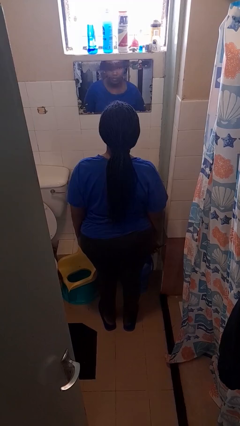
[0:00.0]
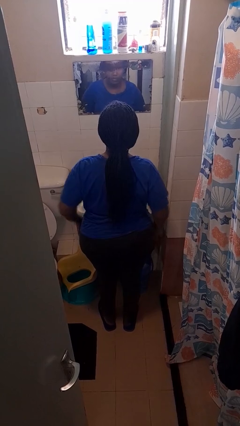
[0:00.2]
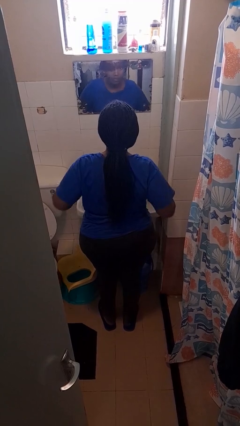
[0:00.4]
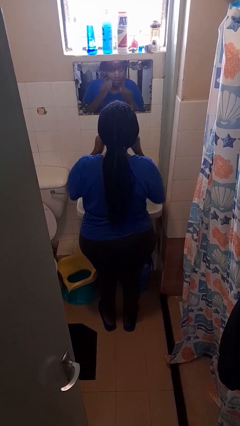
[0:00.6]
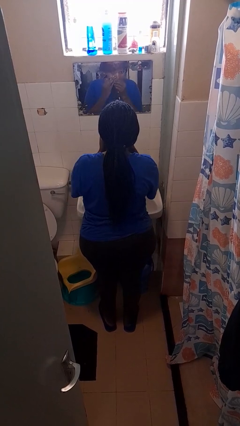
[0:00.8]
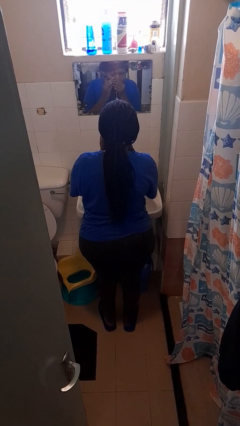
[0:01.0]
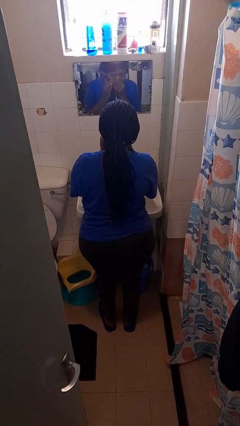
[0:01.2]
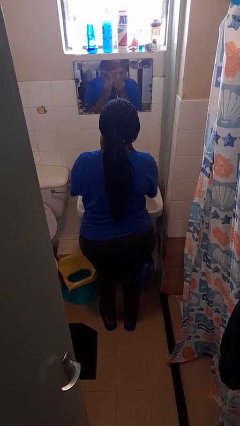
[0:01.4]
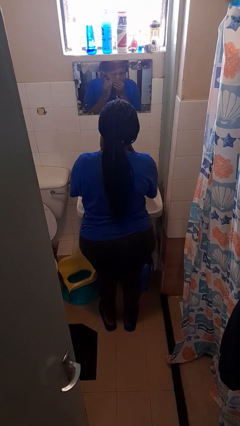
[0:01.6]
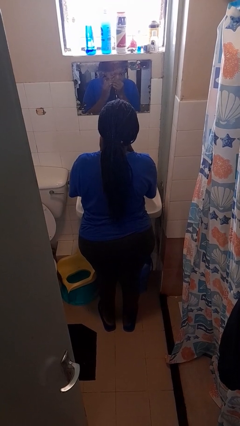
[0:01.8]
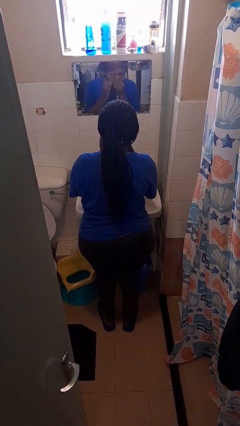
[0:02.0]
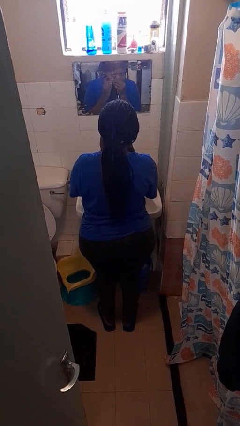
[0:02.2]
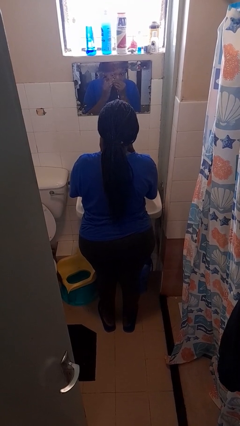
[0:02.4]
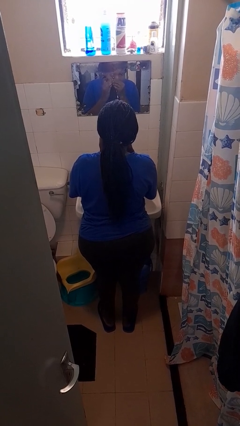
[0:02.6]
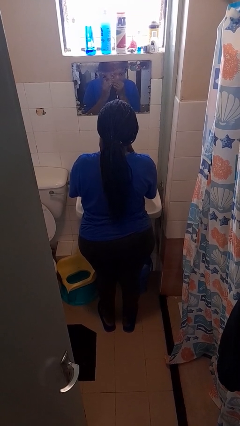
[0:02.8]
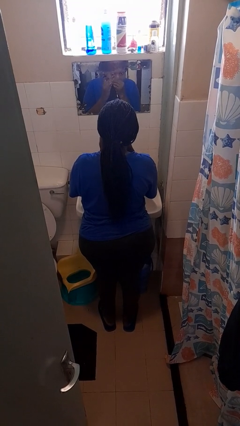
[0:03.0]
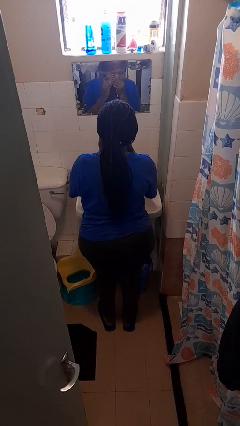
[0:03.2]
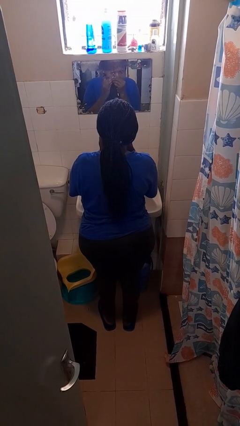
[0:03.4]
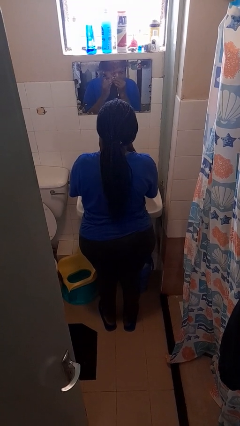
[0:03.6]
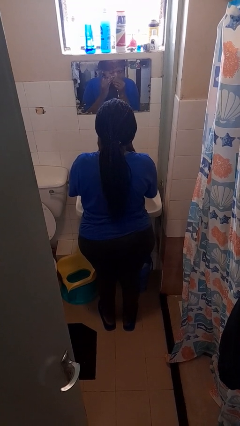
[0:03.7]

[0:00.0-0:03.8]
person applies eye makeup

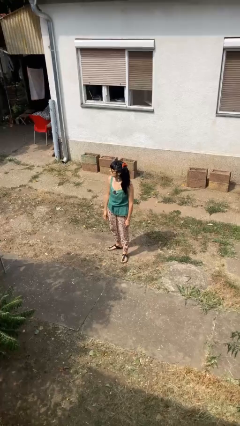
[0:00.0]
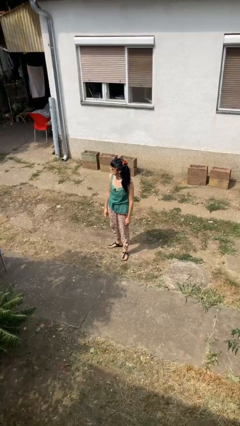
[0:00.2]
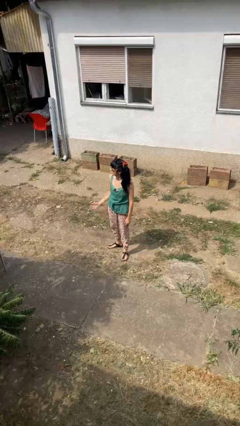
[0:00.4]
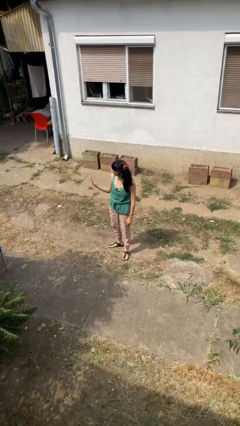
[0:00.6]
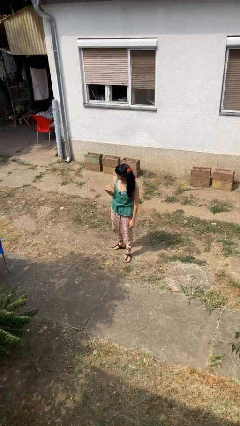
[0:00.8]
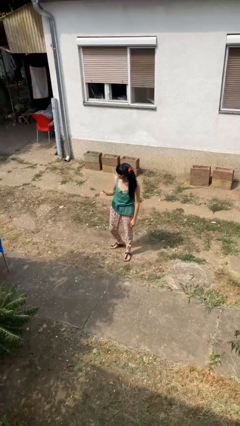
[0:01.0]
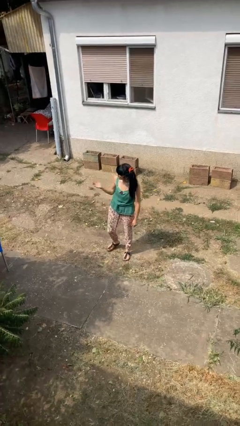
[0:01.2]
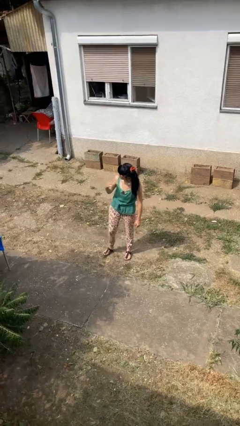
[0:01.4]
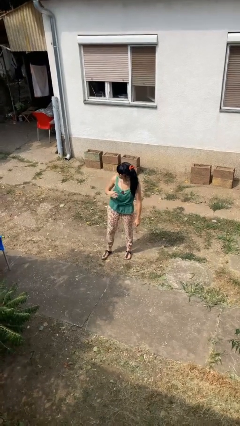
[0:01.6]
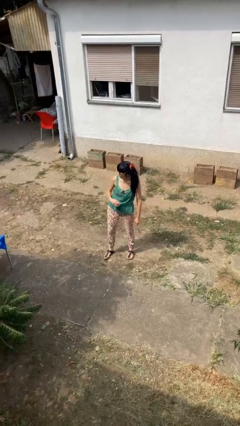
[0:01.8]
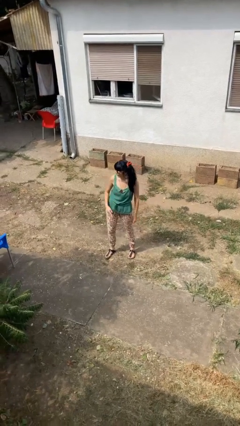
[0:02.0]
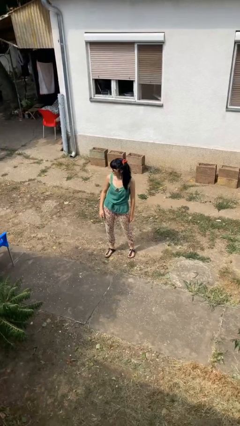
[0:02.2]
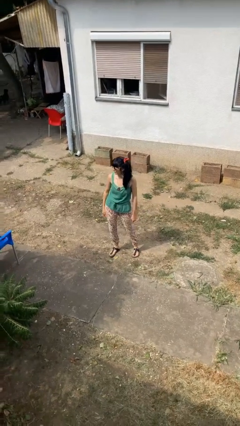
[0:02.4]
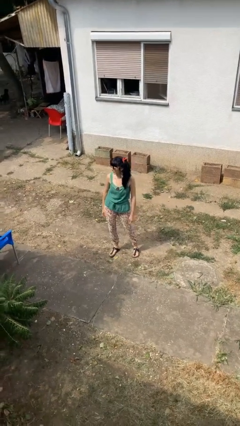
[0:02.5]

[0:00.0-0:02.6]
person gestures come here

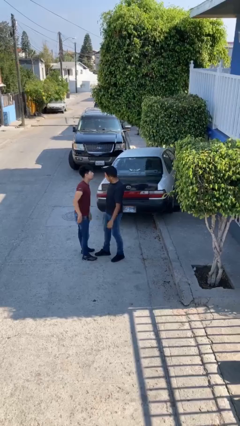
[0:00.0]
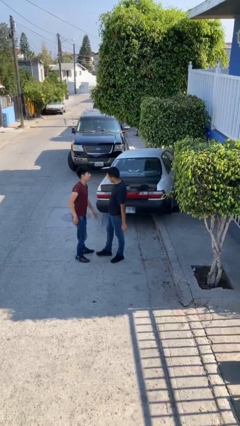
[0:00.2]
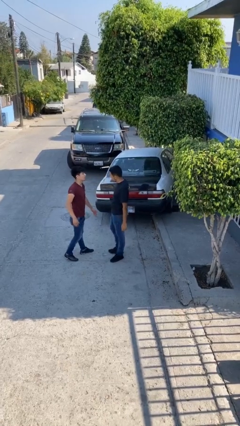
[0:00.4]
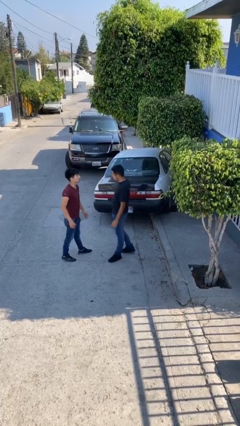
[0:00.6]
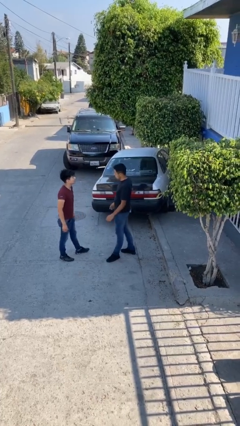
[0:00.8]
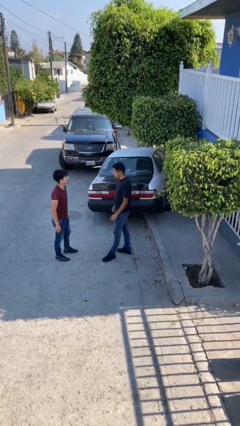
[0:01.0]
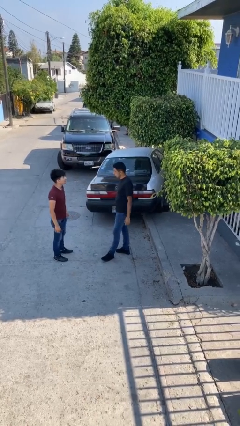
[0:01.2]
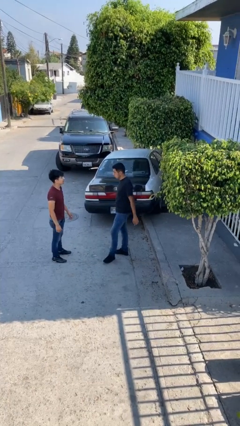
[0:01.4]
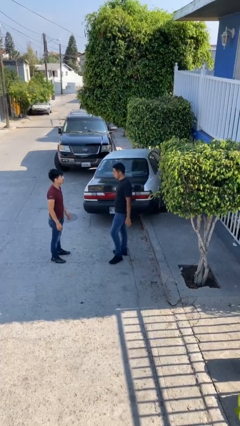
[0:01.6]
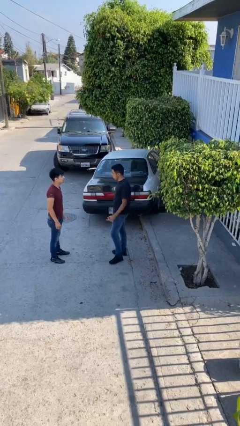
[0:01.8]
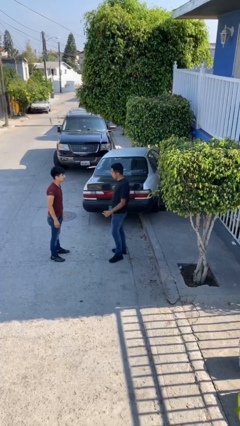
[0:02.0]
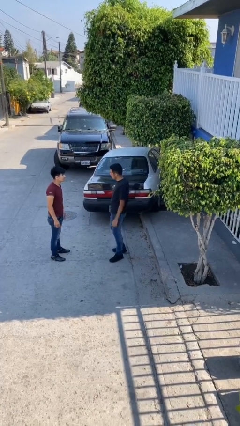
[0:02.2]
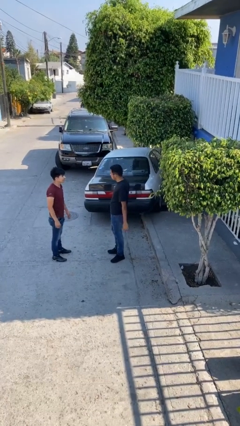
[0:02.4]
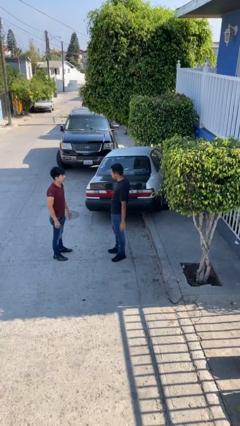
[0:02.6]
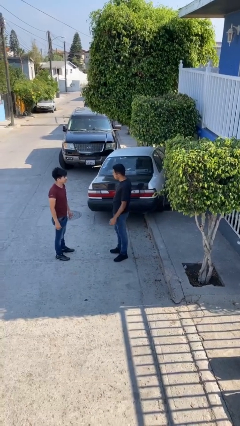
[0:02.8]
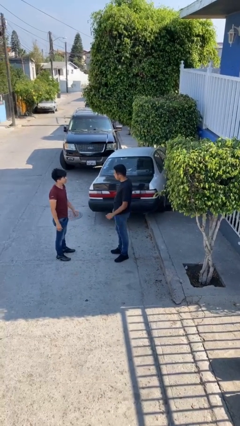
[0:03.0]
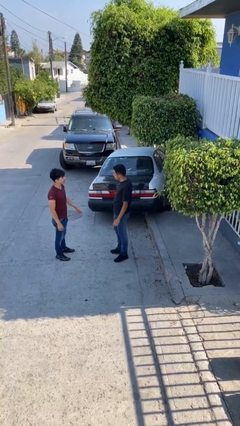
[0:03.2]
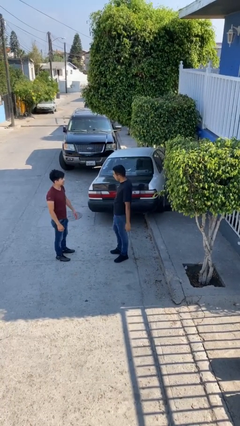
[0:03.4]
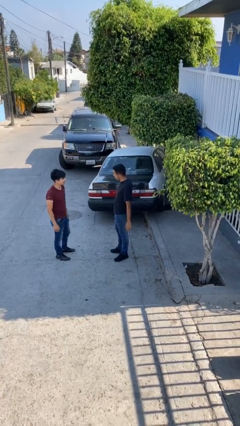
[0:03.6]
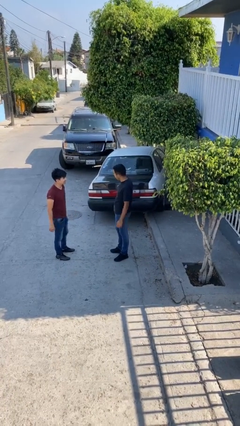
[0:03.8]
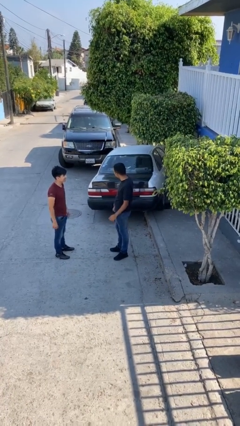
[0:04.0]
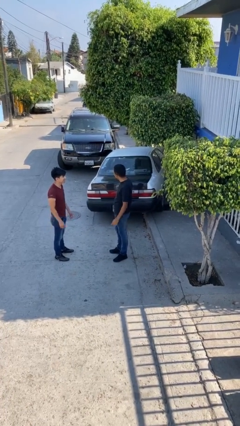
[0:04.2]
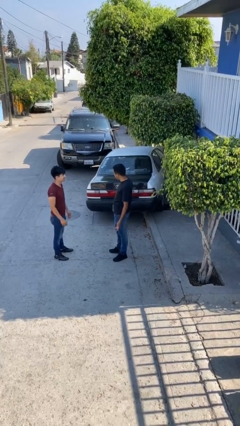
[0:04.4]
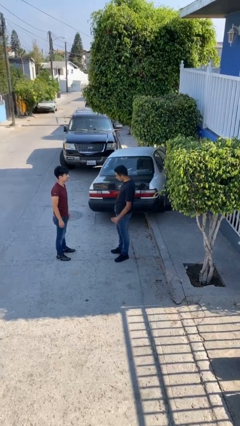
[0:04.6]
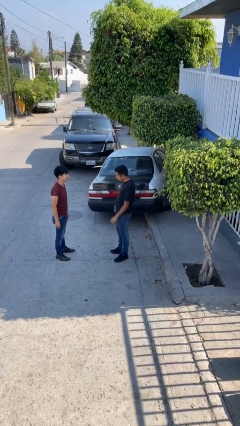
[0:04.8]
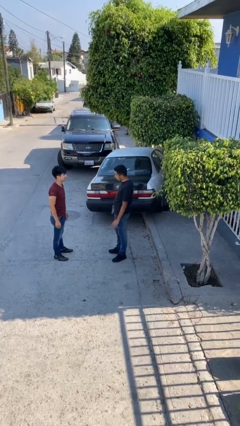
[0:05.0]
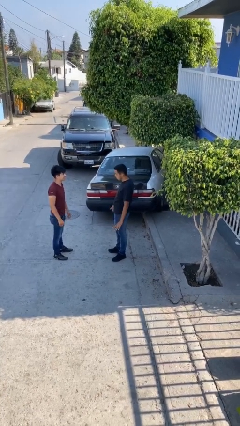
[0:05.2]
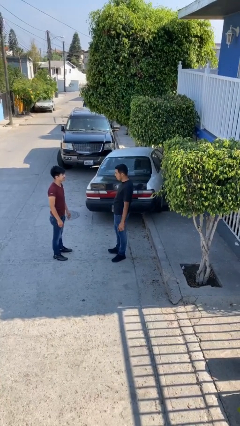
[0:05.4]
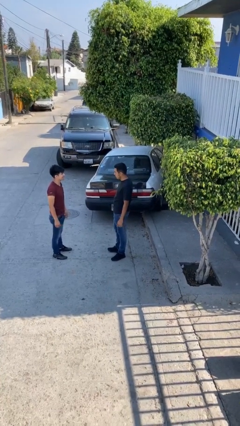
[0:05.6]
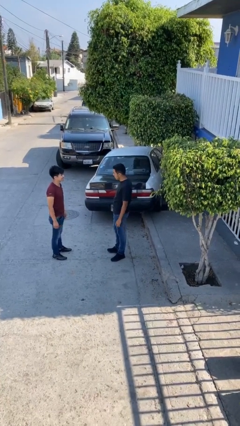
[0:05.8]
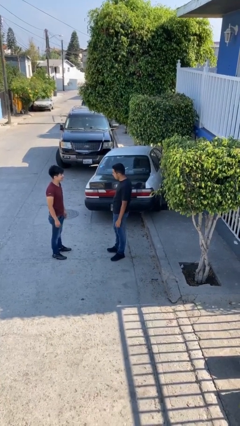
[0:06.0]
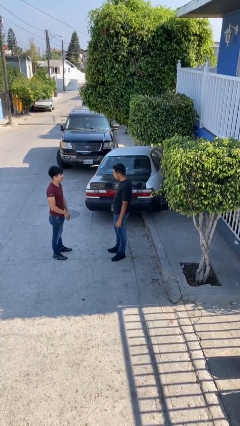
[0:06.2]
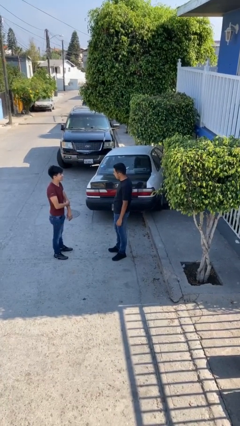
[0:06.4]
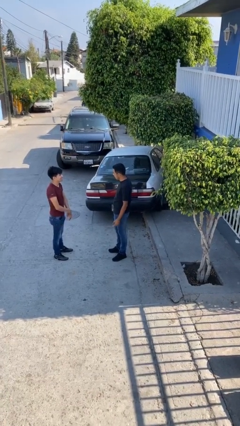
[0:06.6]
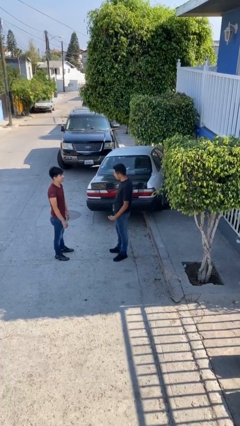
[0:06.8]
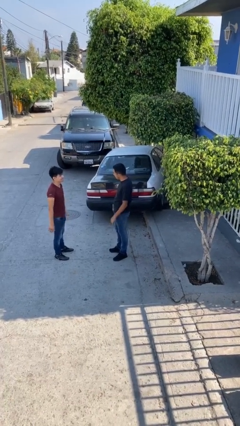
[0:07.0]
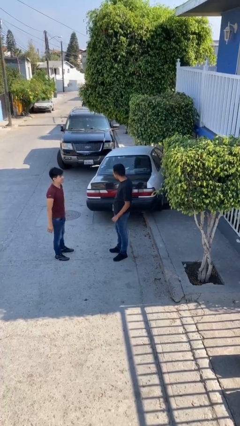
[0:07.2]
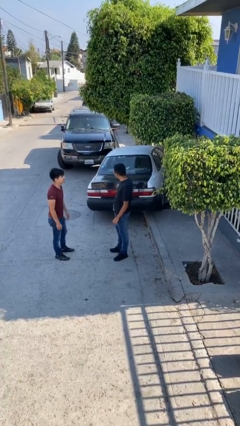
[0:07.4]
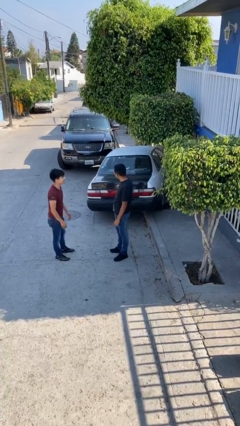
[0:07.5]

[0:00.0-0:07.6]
person talks to person

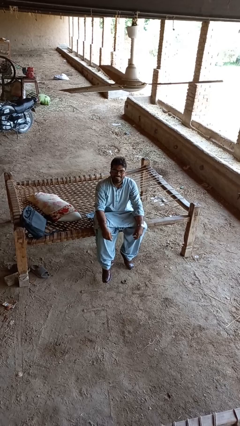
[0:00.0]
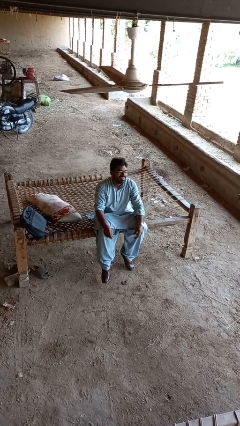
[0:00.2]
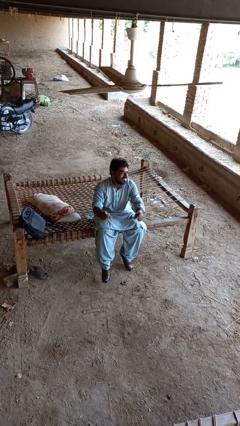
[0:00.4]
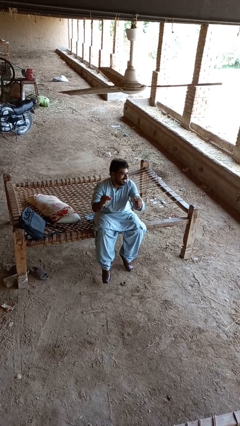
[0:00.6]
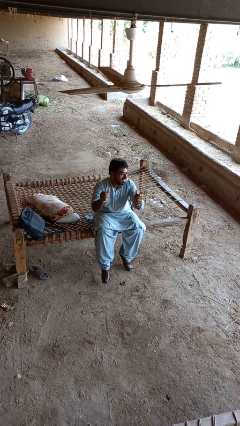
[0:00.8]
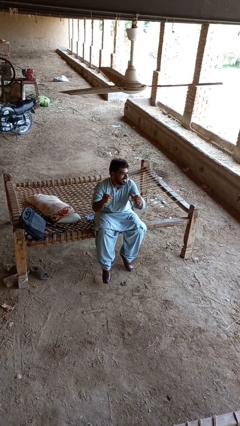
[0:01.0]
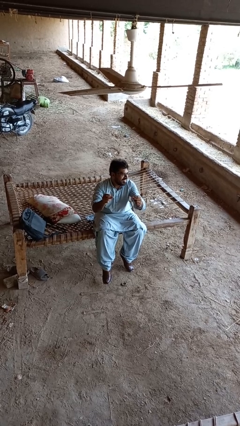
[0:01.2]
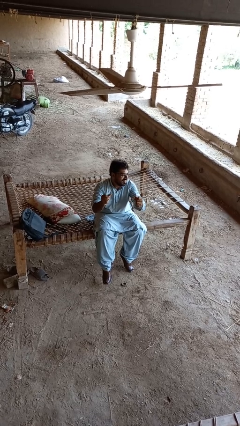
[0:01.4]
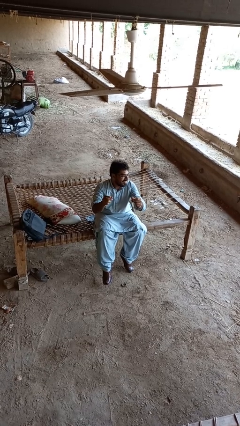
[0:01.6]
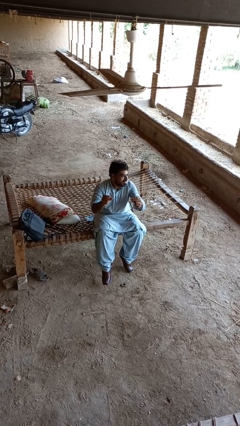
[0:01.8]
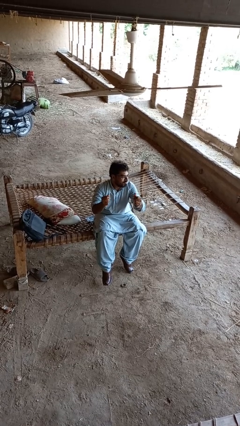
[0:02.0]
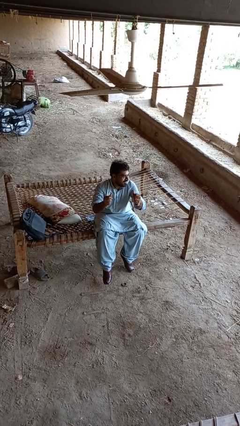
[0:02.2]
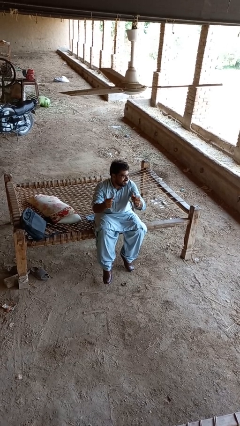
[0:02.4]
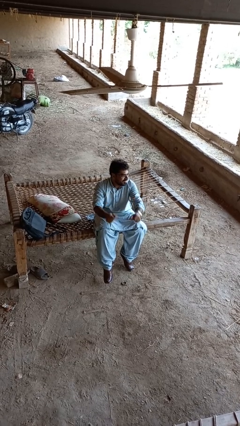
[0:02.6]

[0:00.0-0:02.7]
person snaps fingers

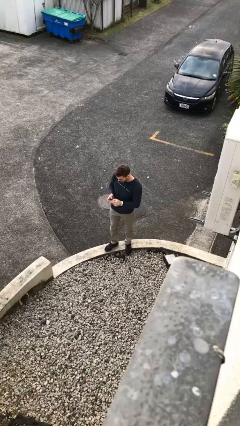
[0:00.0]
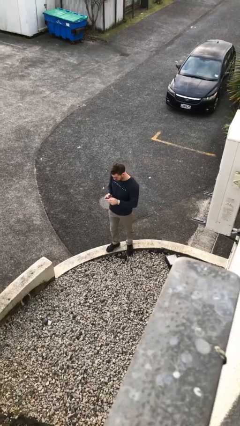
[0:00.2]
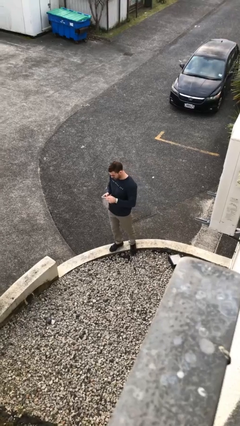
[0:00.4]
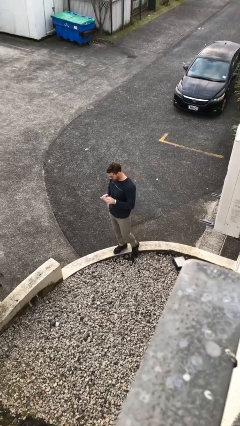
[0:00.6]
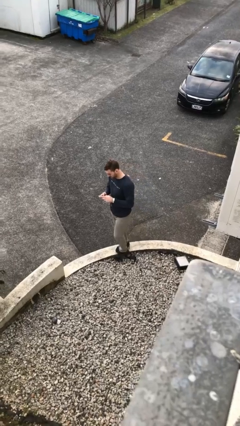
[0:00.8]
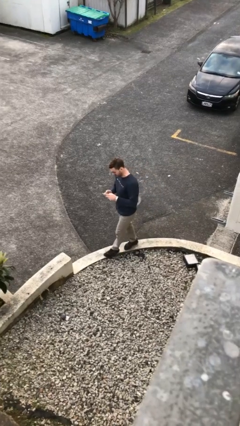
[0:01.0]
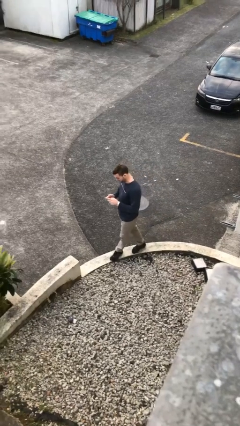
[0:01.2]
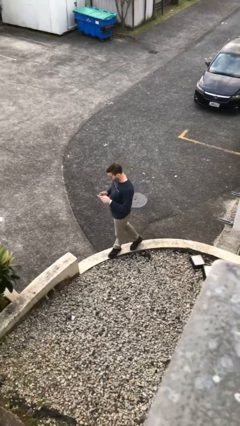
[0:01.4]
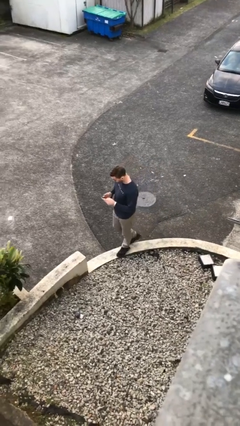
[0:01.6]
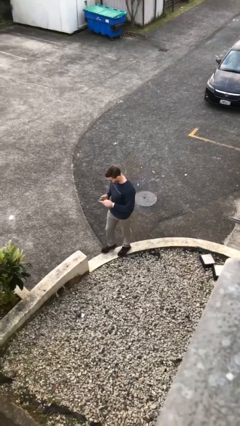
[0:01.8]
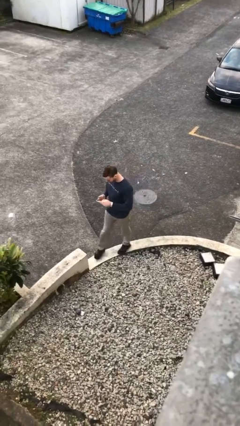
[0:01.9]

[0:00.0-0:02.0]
person texts on phone
